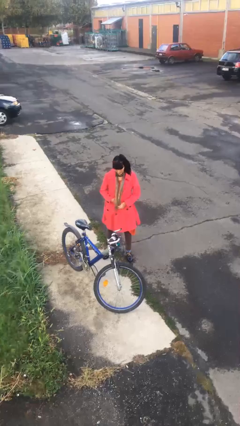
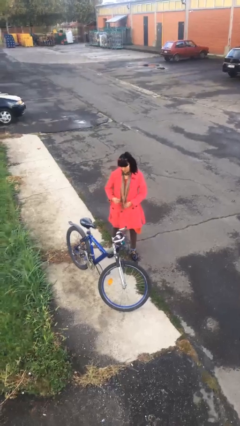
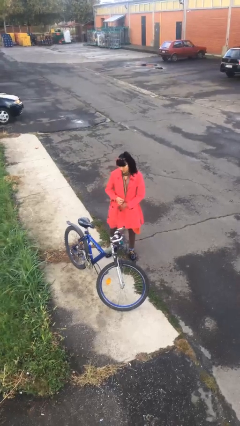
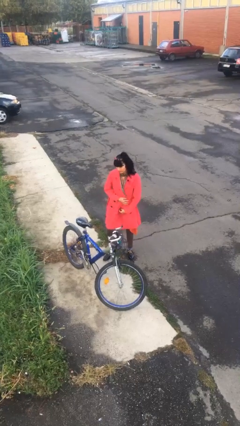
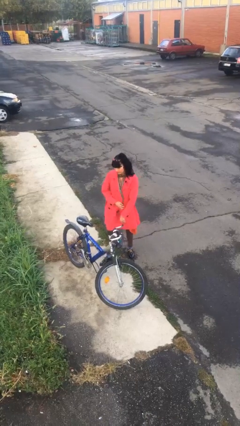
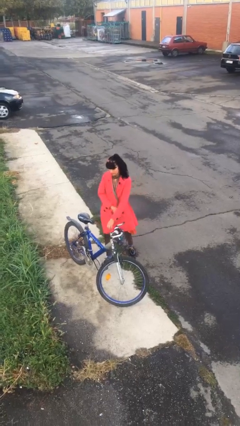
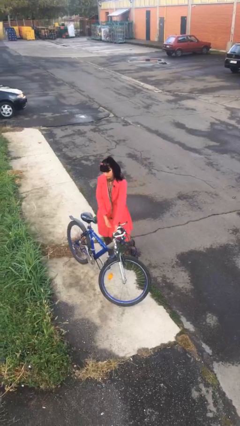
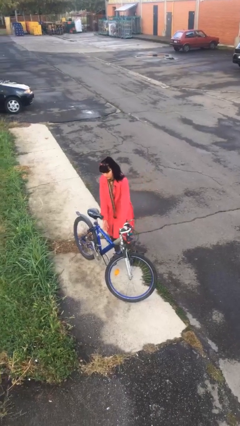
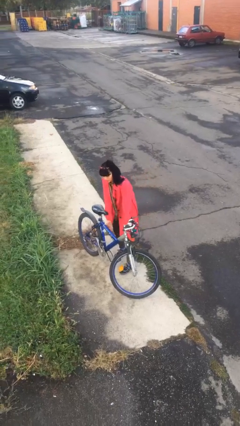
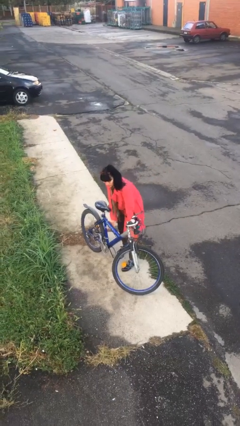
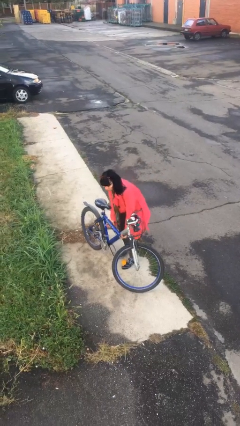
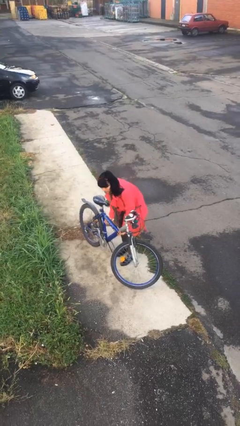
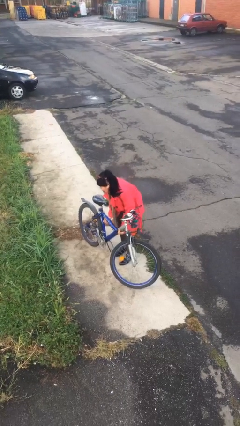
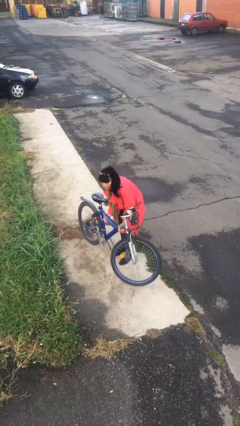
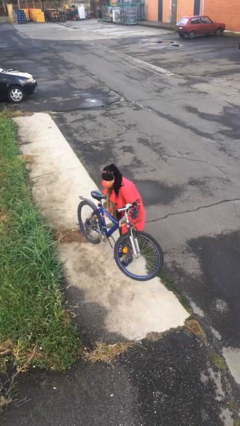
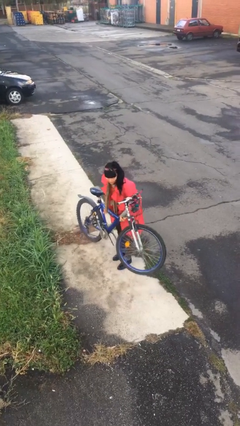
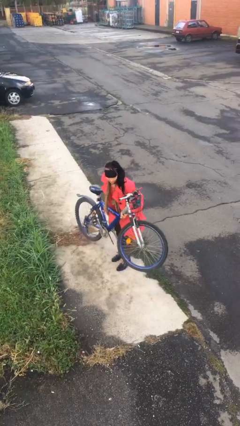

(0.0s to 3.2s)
person picks up object from floor

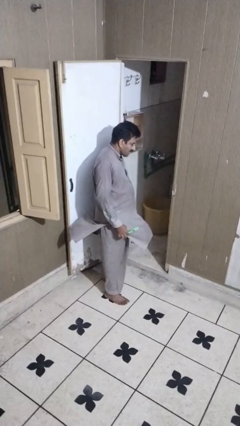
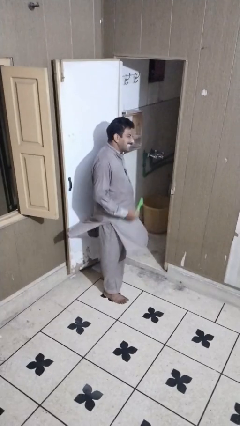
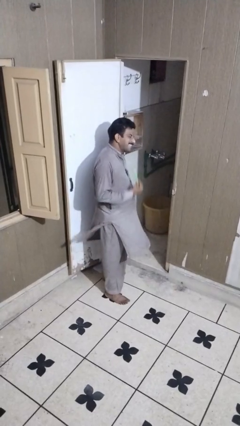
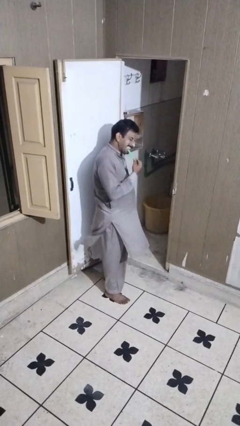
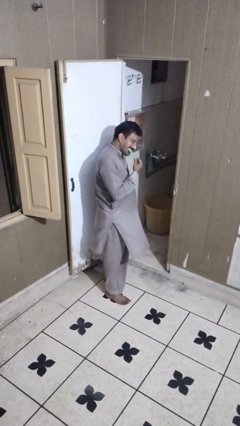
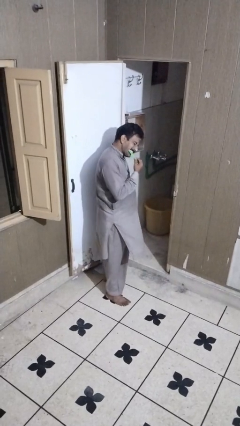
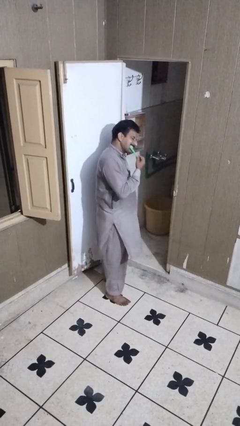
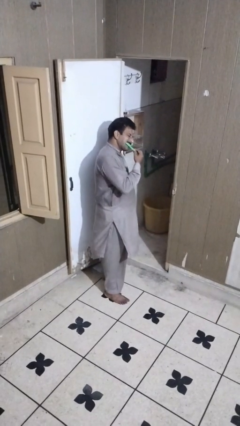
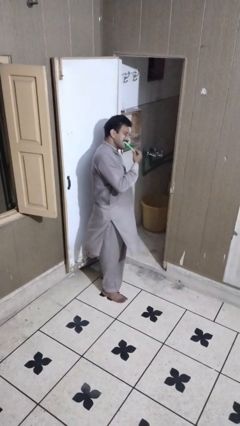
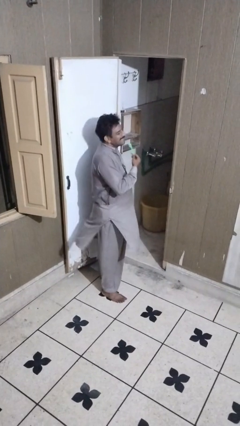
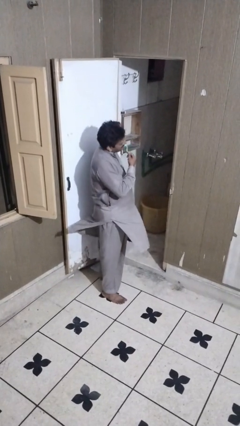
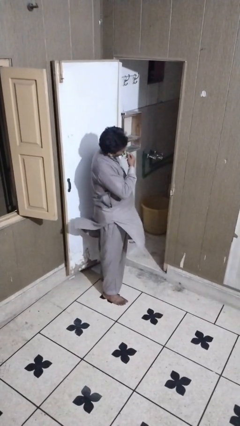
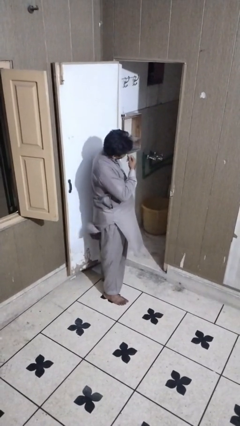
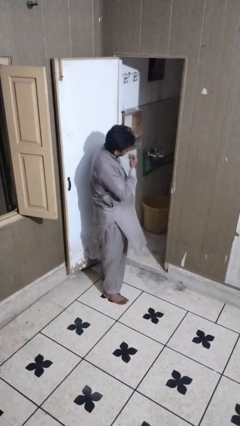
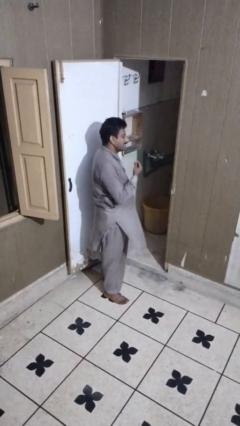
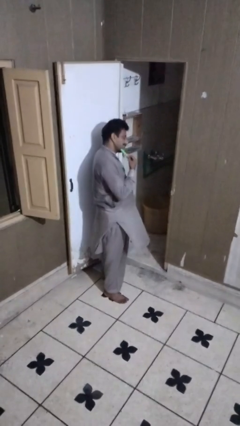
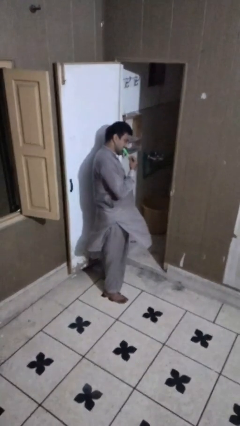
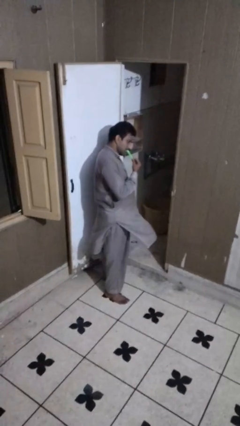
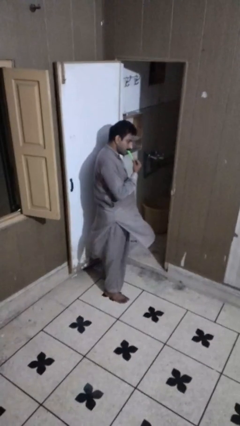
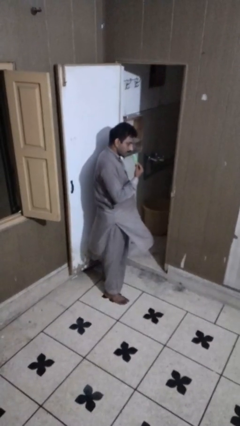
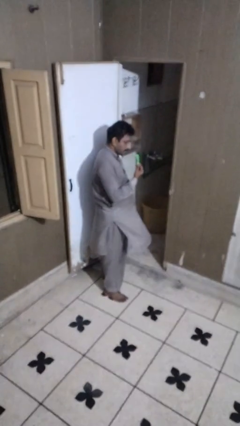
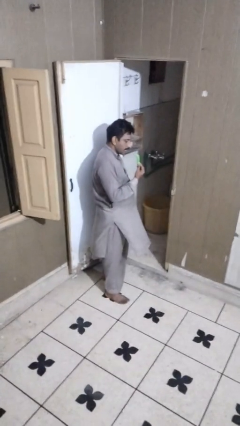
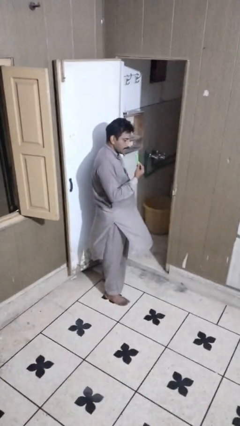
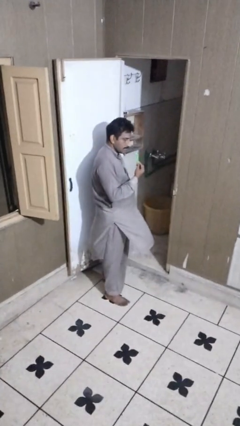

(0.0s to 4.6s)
person brushes teeth

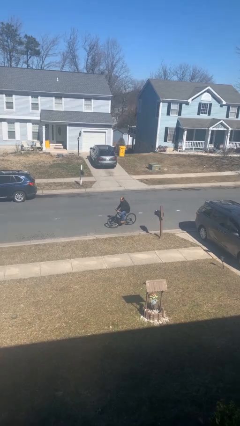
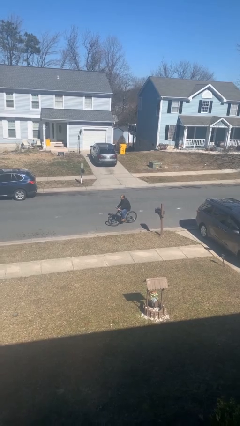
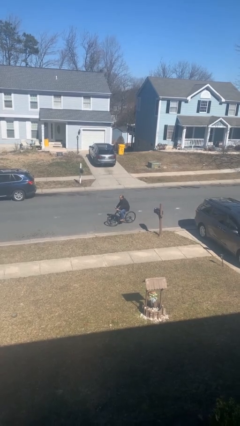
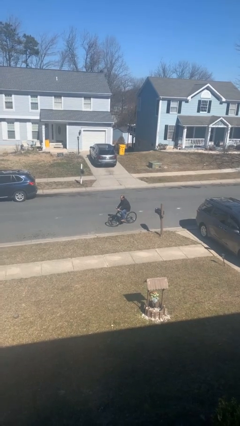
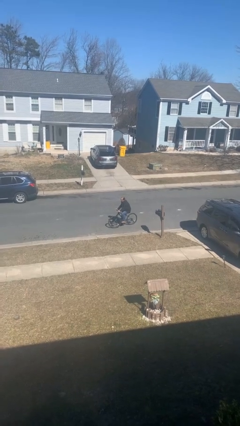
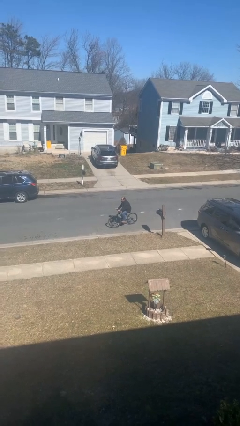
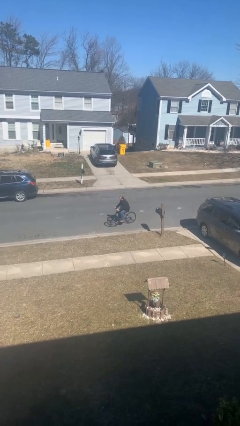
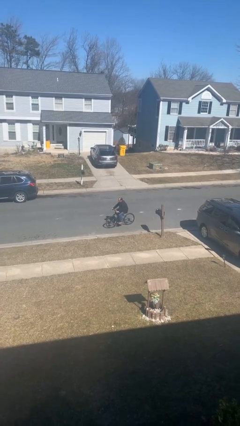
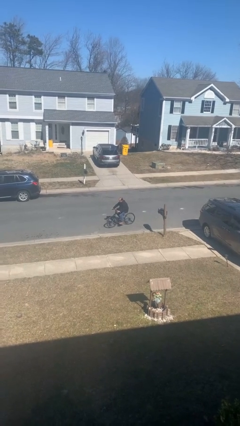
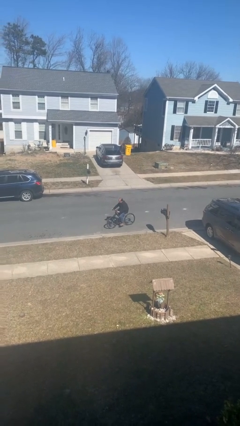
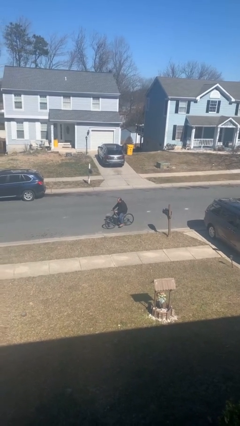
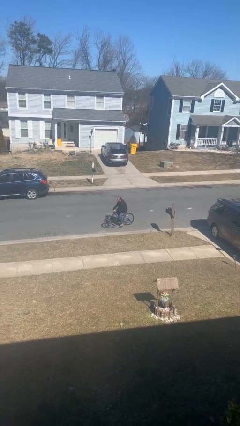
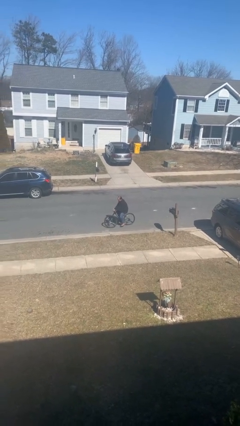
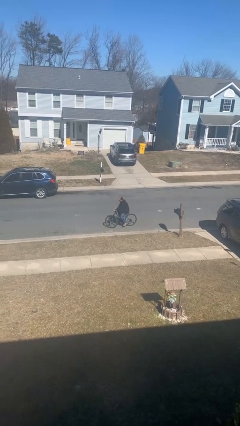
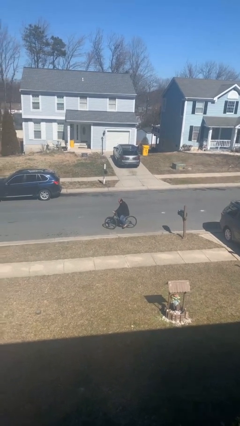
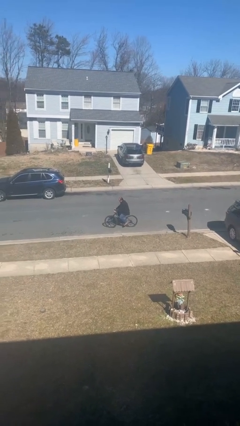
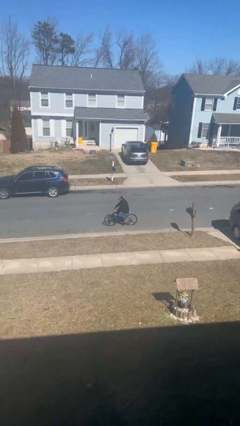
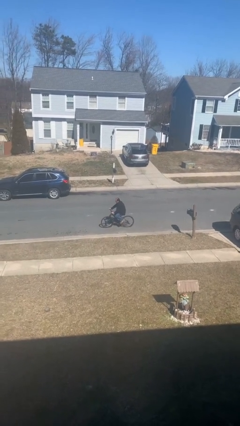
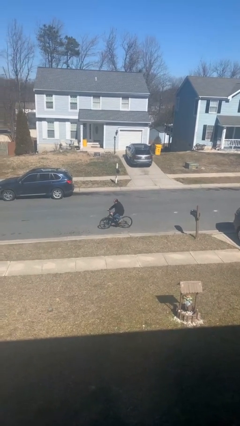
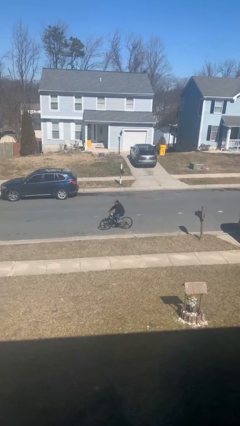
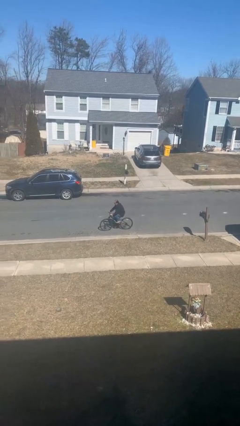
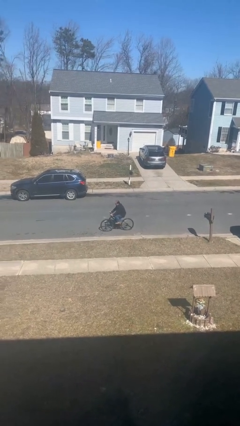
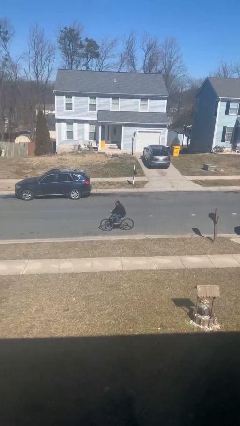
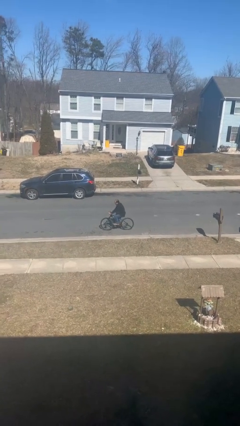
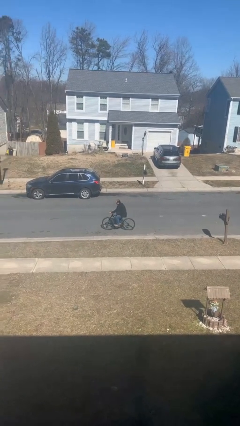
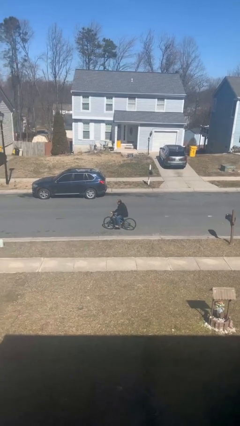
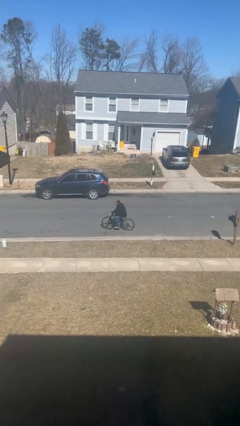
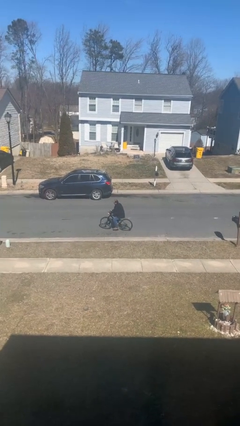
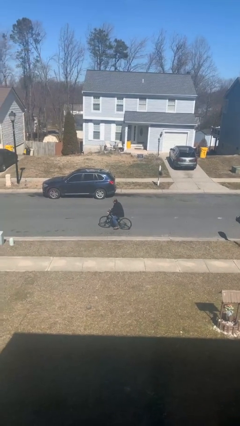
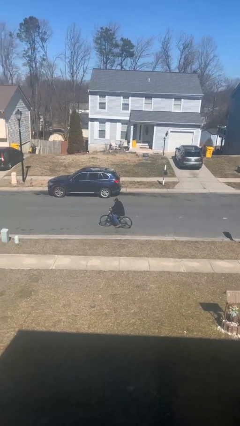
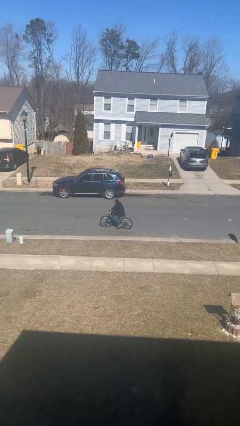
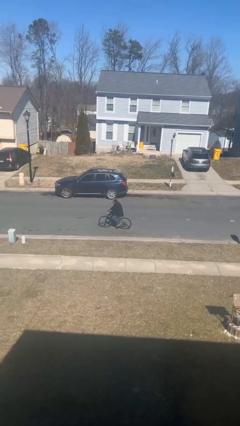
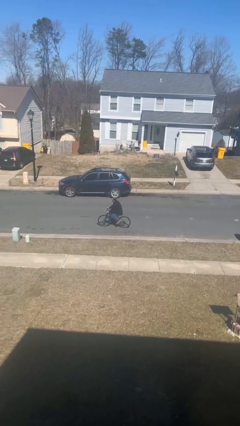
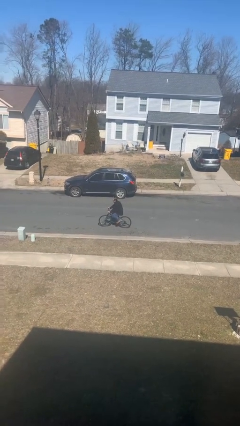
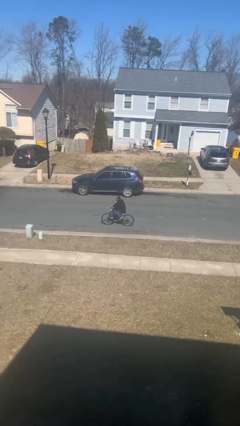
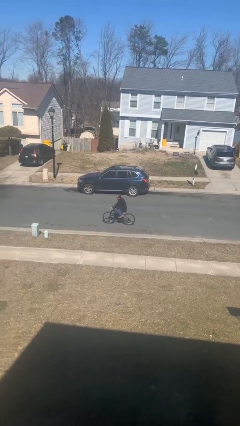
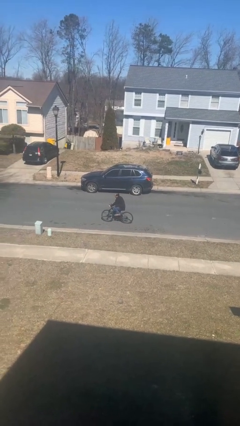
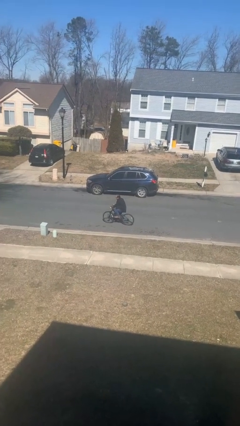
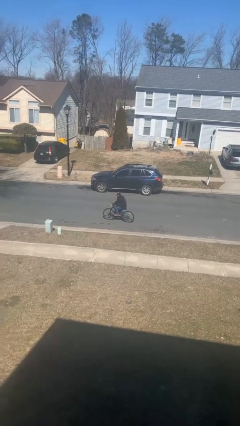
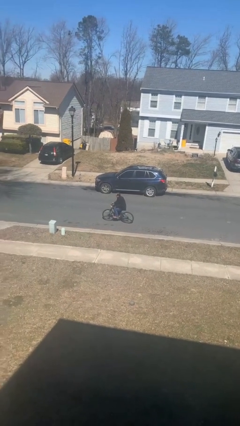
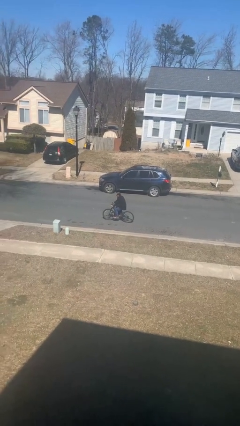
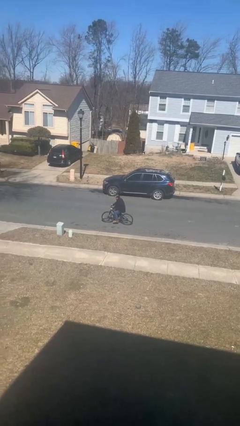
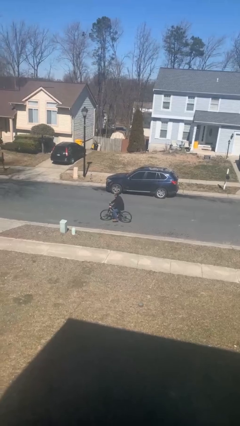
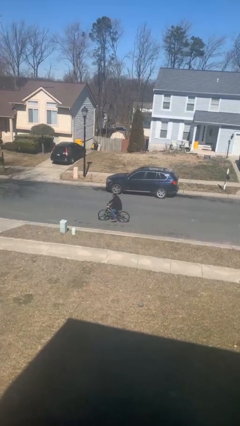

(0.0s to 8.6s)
person rides bicycle

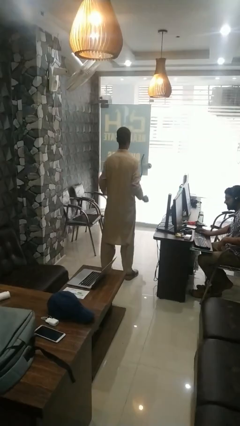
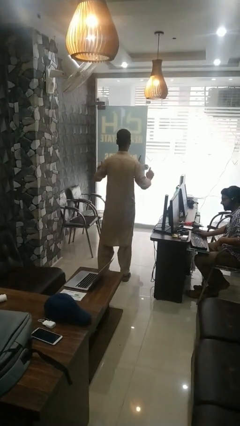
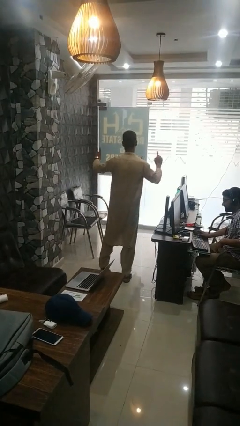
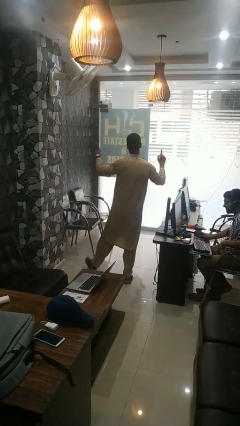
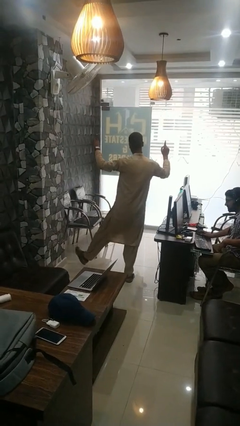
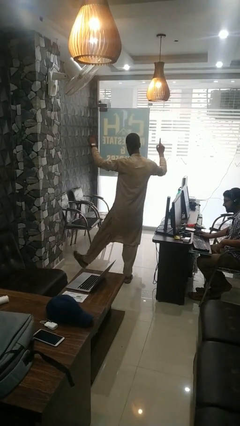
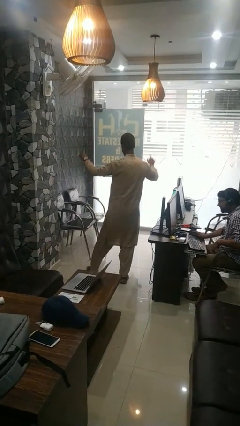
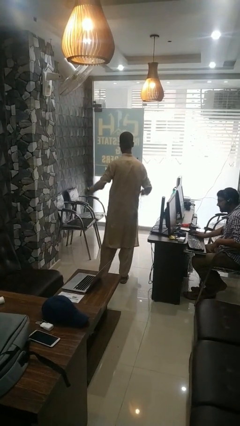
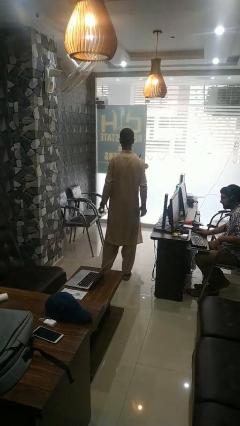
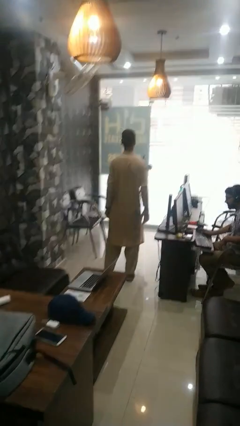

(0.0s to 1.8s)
person dances in place

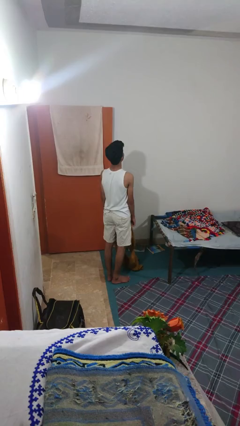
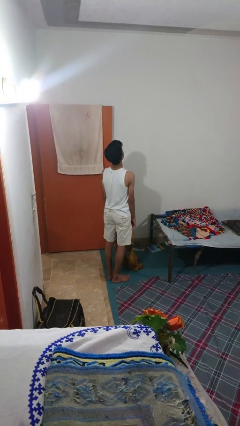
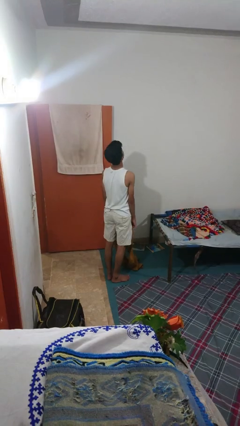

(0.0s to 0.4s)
person takes off pants
